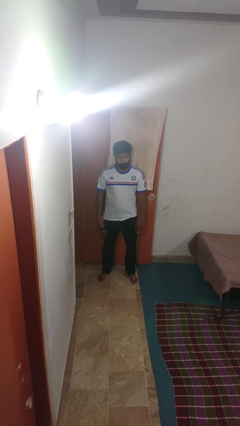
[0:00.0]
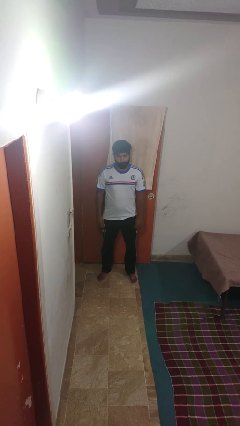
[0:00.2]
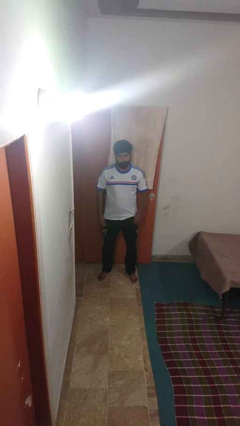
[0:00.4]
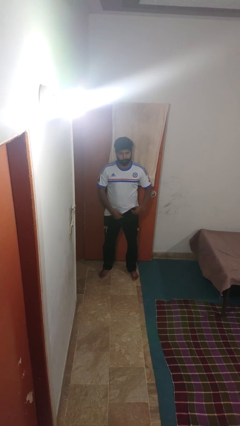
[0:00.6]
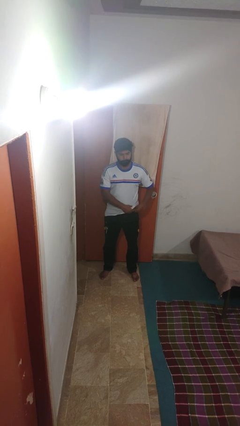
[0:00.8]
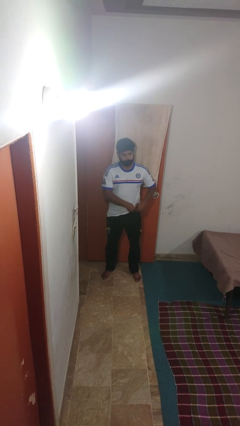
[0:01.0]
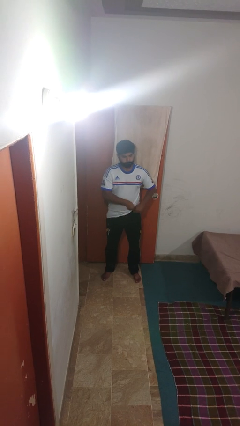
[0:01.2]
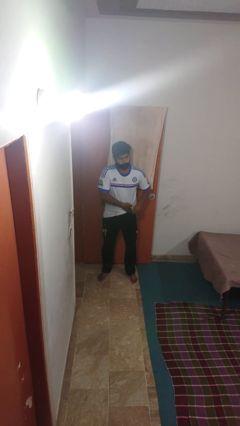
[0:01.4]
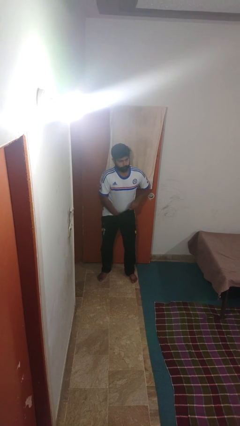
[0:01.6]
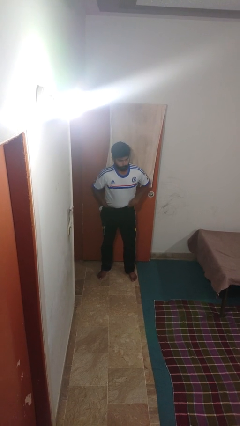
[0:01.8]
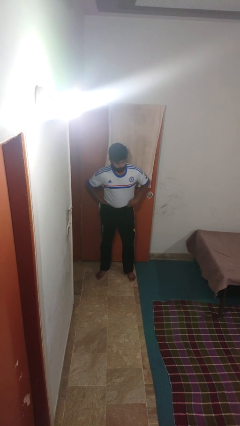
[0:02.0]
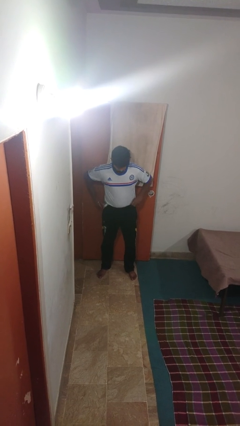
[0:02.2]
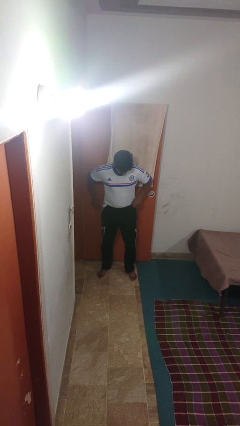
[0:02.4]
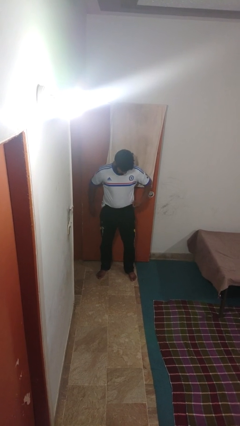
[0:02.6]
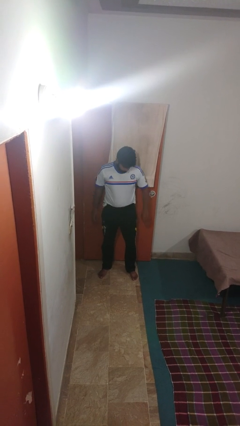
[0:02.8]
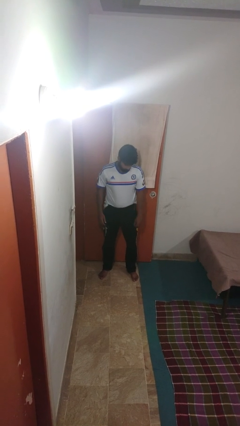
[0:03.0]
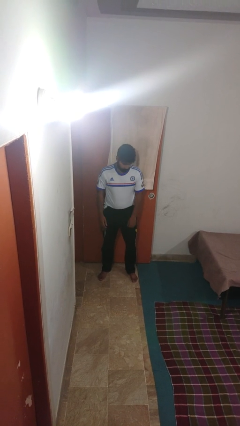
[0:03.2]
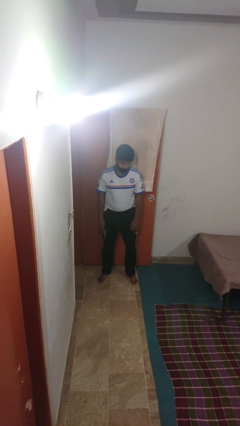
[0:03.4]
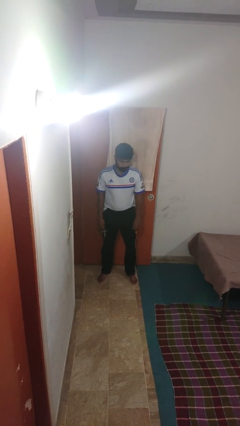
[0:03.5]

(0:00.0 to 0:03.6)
person tucks in shirt

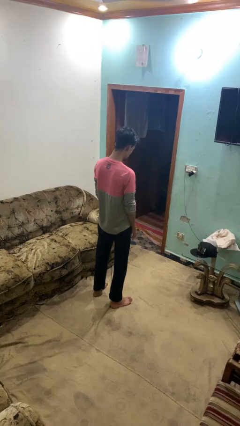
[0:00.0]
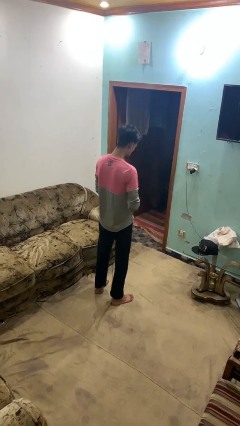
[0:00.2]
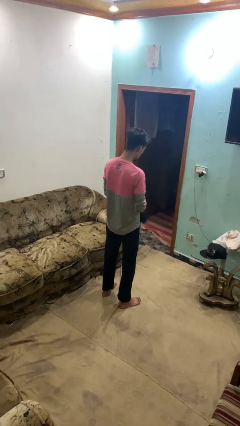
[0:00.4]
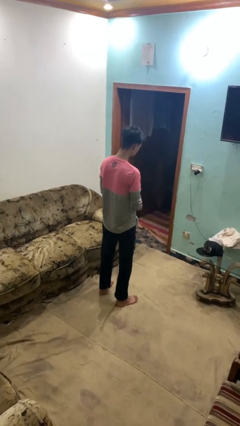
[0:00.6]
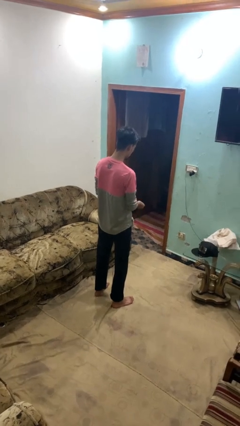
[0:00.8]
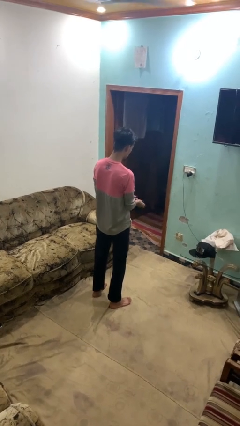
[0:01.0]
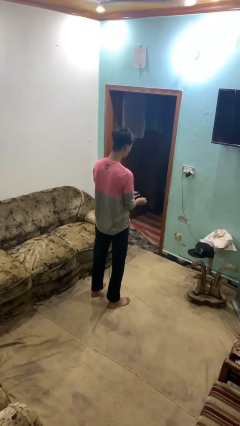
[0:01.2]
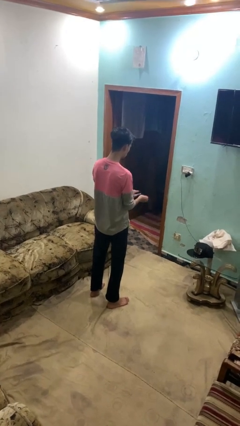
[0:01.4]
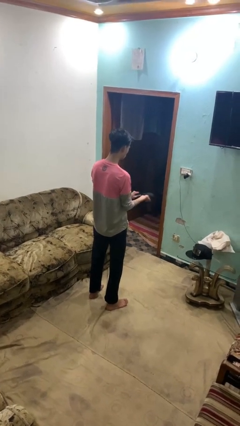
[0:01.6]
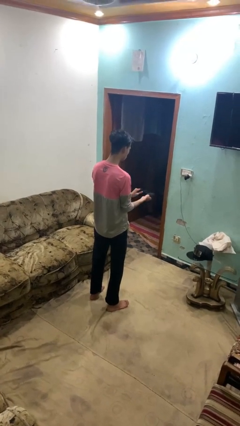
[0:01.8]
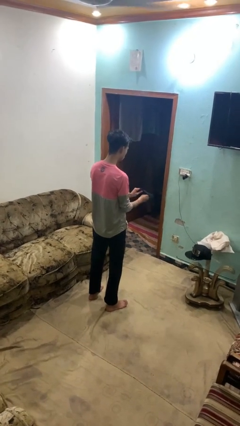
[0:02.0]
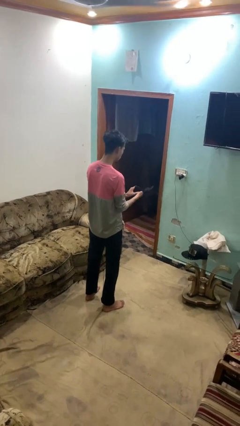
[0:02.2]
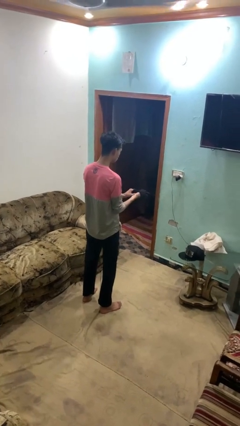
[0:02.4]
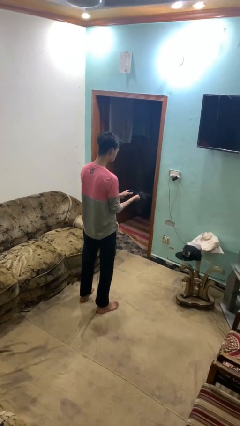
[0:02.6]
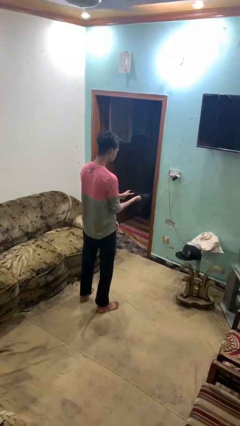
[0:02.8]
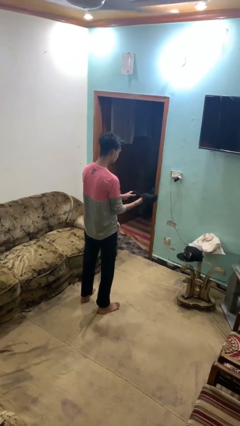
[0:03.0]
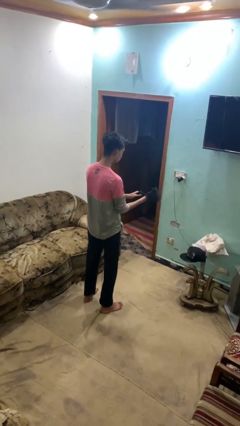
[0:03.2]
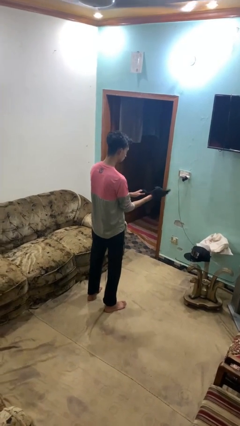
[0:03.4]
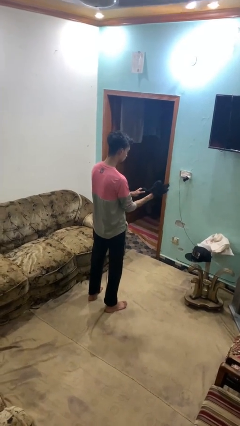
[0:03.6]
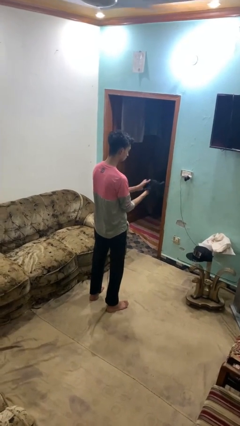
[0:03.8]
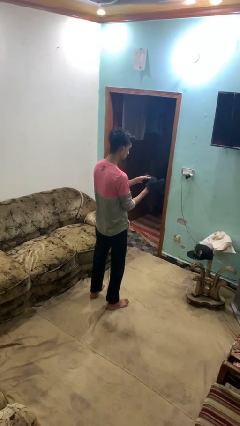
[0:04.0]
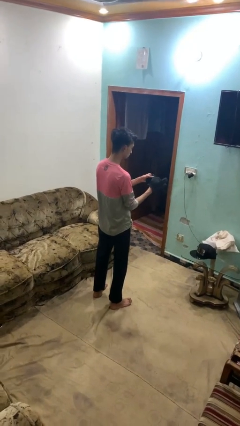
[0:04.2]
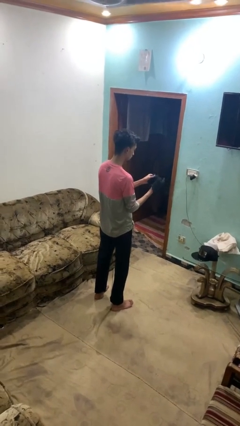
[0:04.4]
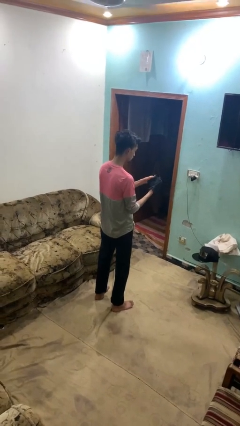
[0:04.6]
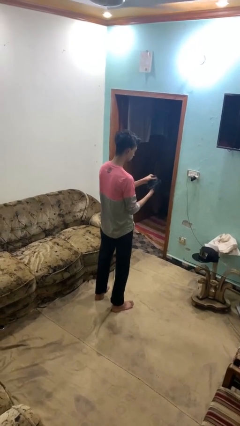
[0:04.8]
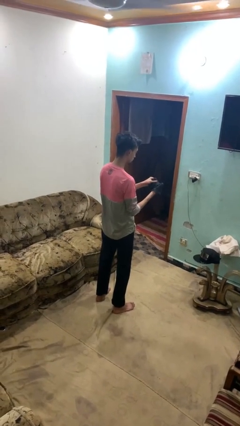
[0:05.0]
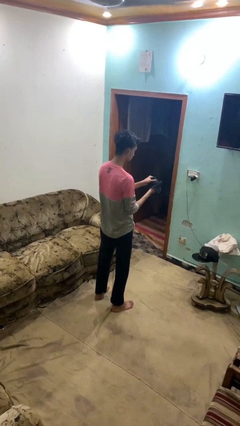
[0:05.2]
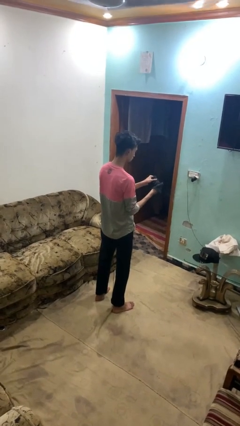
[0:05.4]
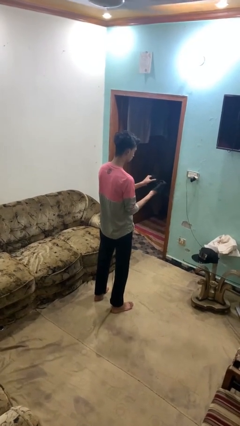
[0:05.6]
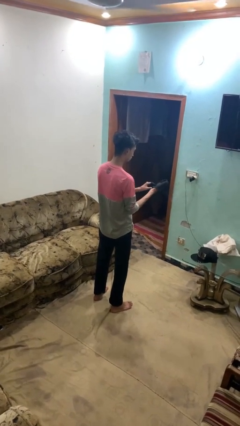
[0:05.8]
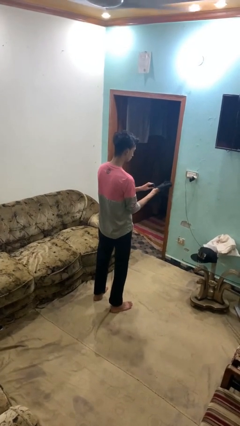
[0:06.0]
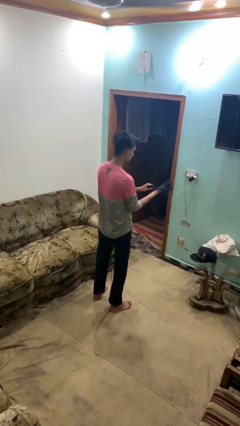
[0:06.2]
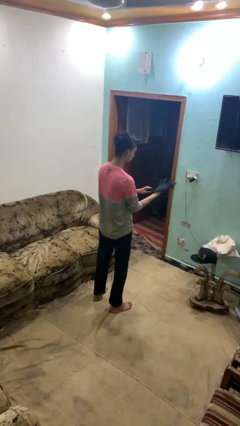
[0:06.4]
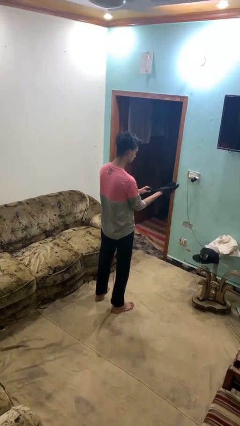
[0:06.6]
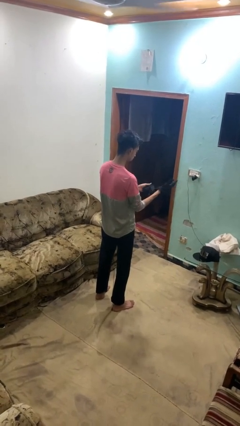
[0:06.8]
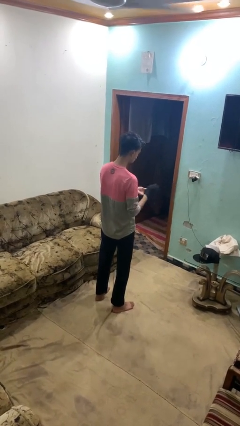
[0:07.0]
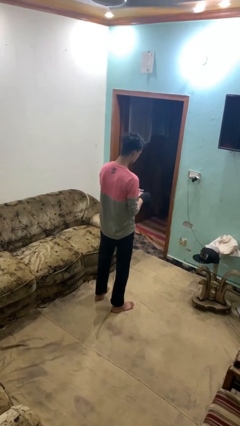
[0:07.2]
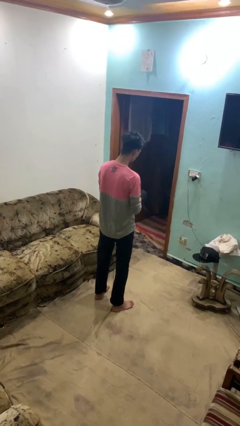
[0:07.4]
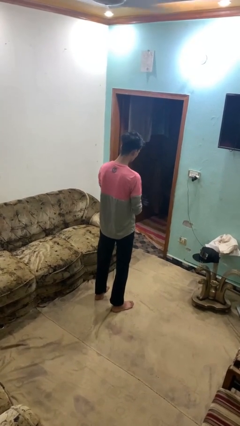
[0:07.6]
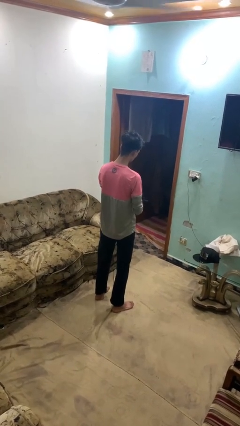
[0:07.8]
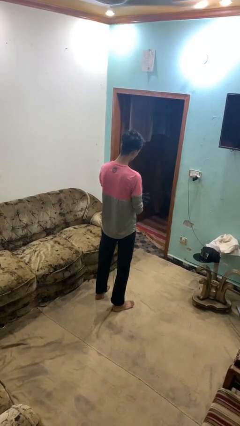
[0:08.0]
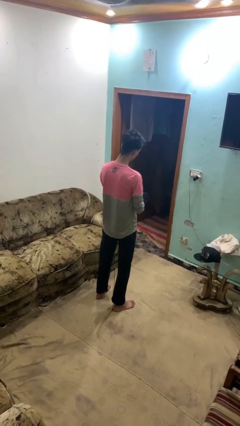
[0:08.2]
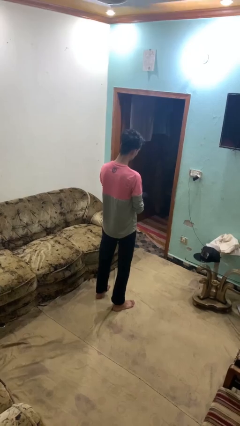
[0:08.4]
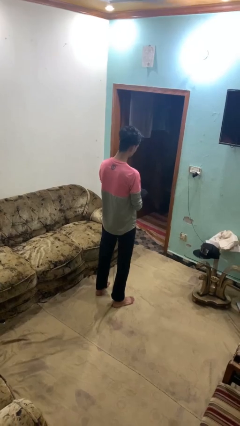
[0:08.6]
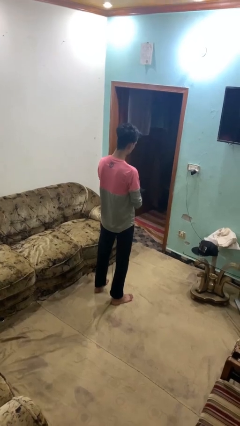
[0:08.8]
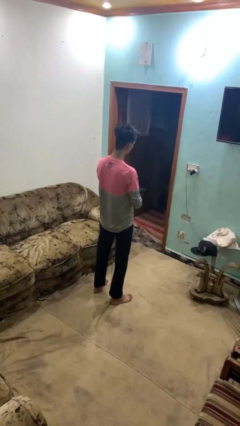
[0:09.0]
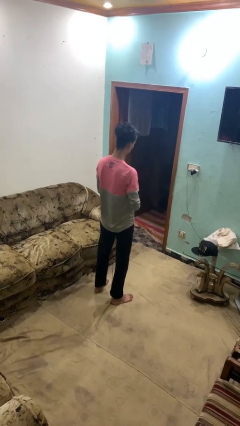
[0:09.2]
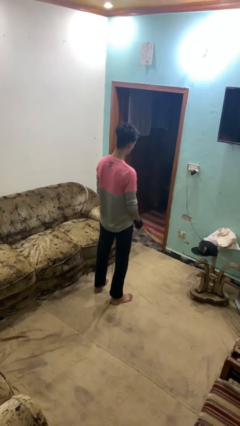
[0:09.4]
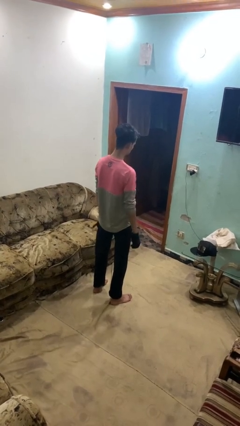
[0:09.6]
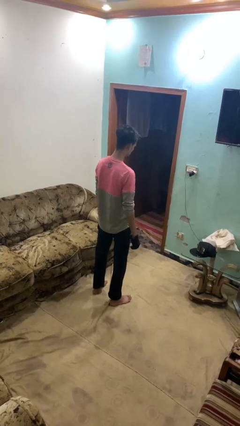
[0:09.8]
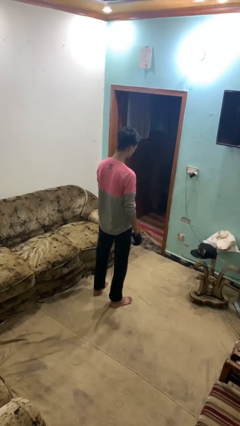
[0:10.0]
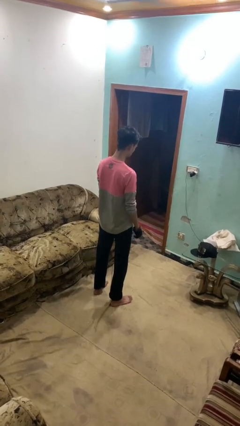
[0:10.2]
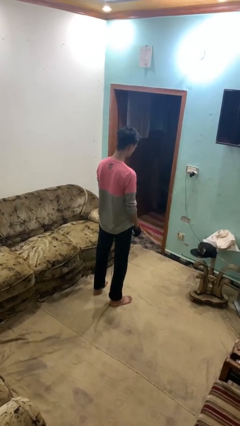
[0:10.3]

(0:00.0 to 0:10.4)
person puts on gloves

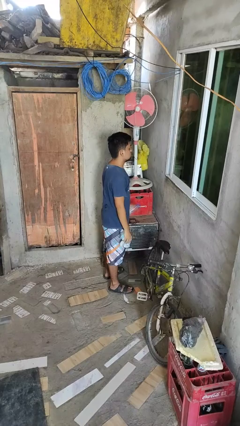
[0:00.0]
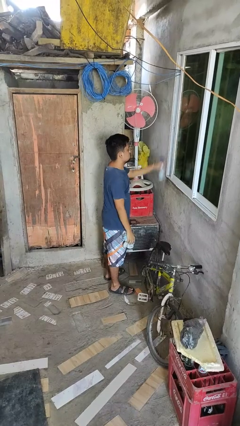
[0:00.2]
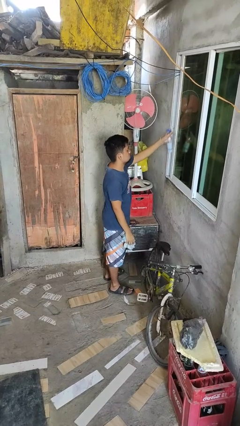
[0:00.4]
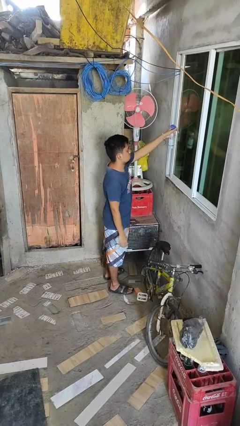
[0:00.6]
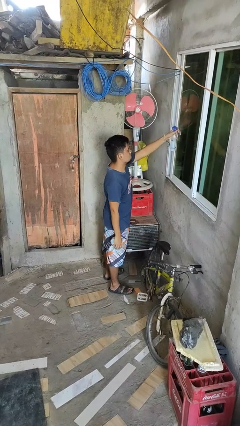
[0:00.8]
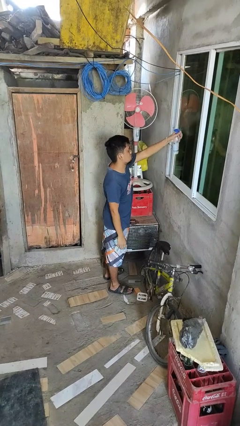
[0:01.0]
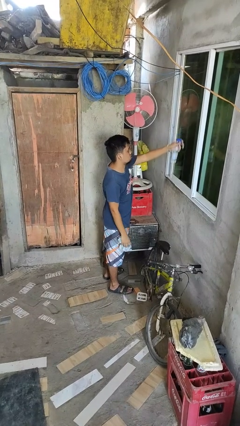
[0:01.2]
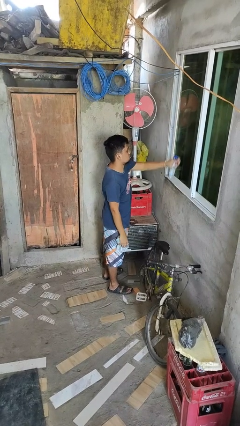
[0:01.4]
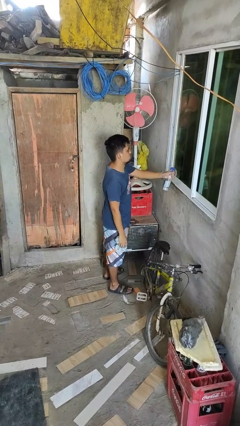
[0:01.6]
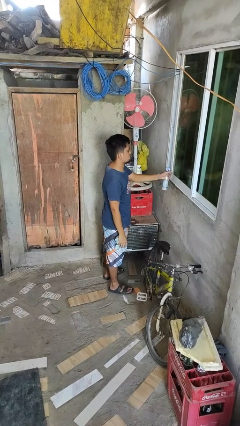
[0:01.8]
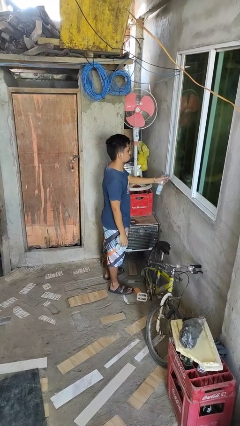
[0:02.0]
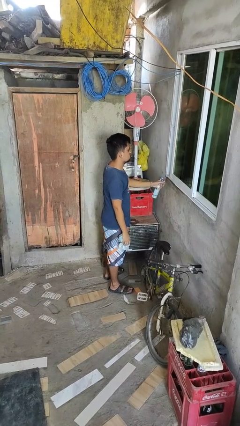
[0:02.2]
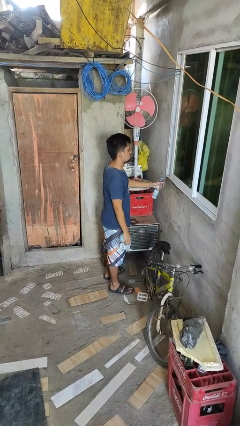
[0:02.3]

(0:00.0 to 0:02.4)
person sprays from bottle

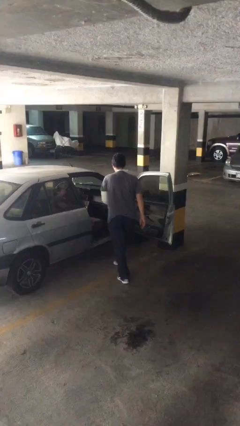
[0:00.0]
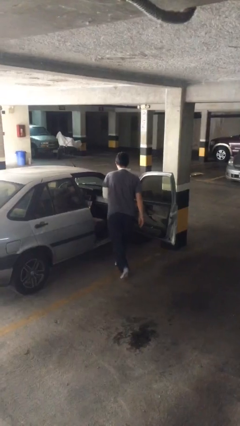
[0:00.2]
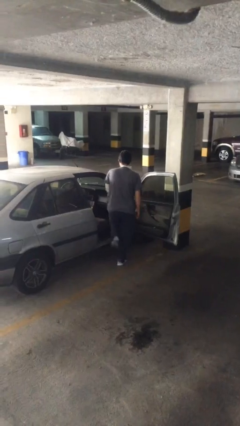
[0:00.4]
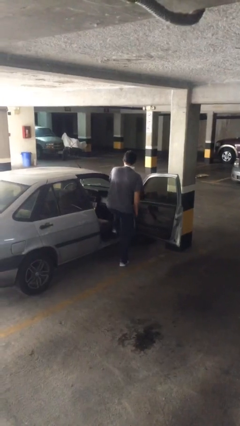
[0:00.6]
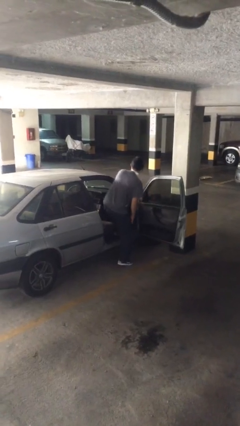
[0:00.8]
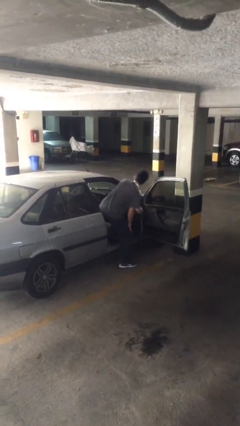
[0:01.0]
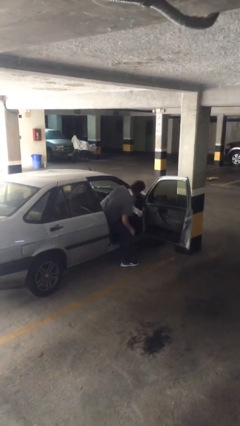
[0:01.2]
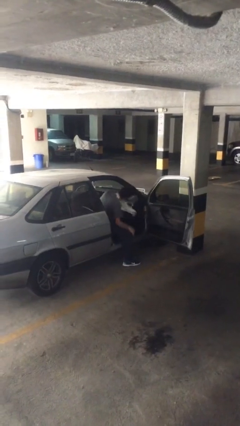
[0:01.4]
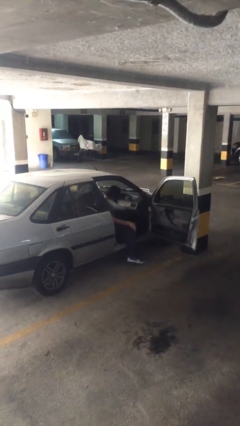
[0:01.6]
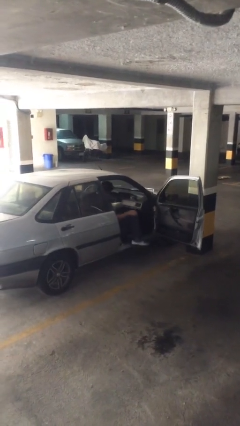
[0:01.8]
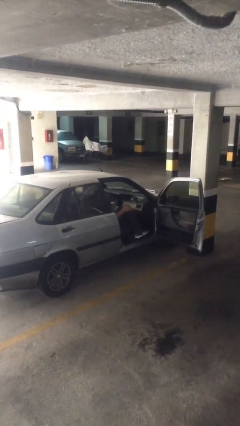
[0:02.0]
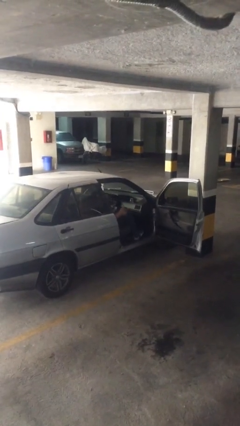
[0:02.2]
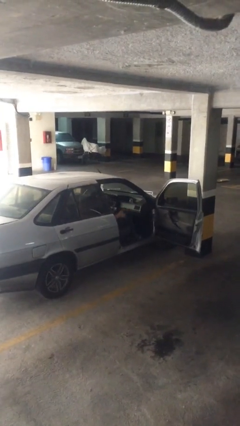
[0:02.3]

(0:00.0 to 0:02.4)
person enters car
